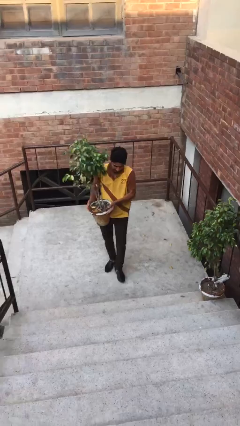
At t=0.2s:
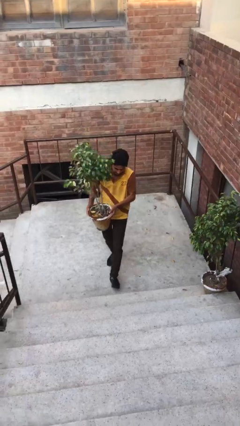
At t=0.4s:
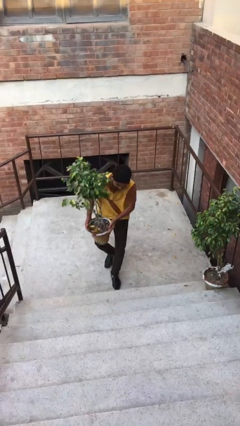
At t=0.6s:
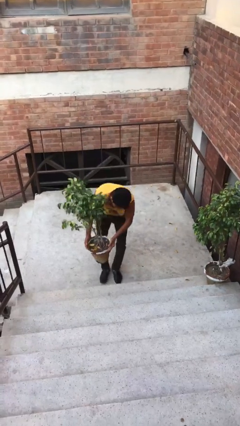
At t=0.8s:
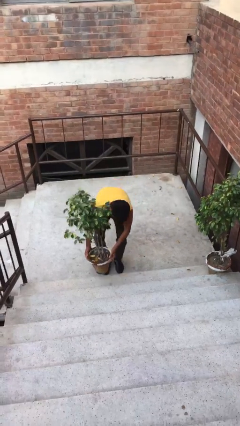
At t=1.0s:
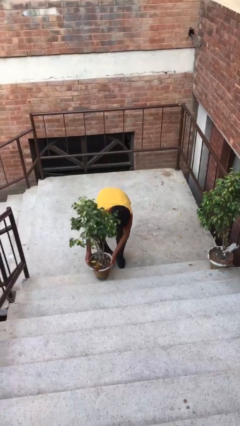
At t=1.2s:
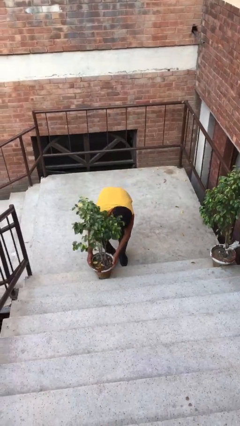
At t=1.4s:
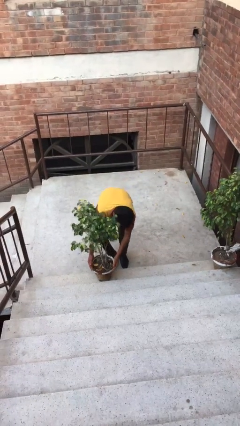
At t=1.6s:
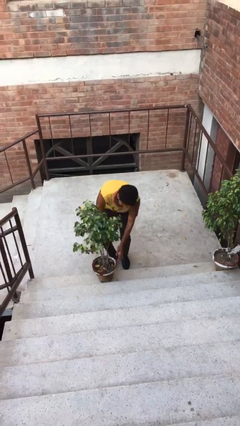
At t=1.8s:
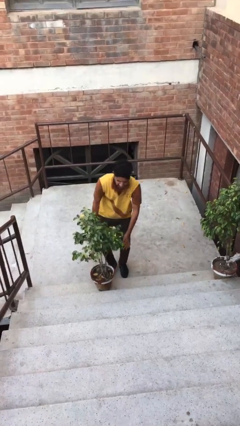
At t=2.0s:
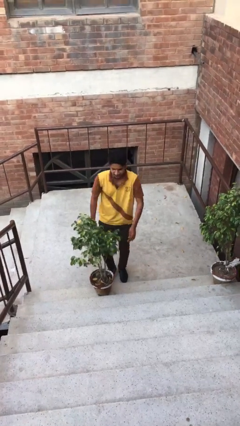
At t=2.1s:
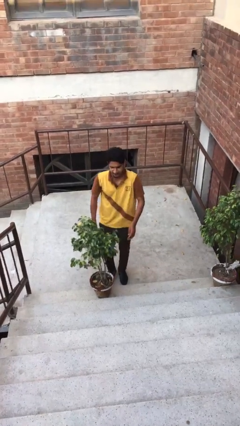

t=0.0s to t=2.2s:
person puts down object on floor

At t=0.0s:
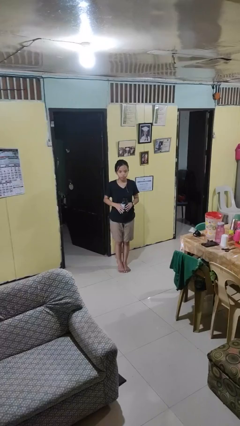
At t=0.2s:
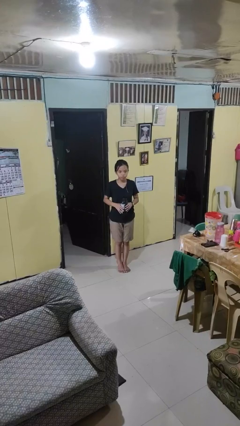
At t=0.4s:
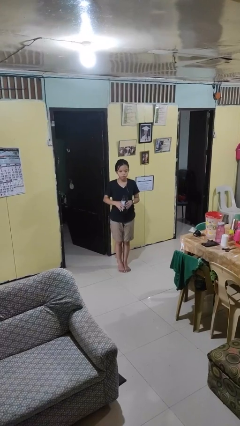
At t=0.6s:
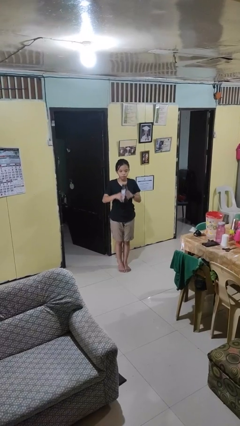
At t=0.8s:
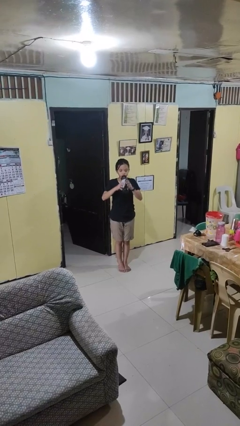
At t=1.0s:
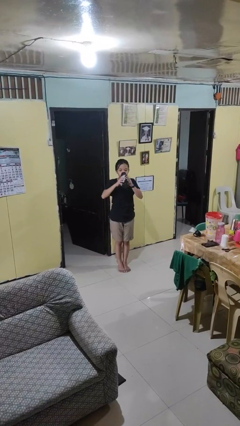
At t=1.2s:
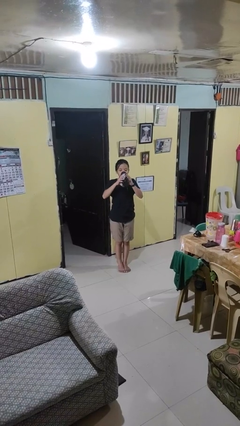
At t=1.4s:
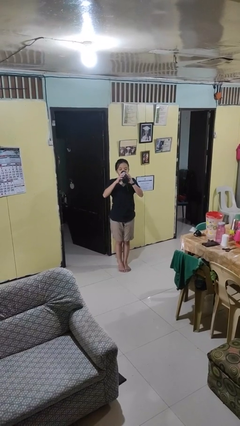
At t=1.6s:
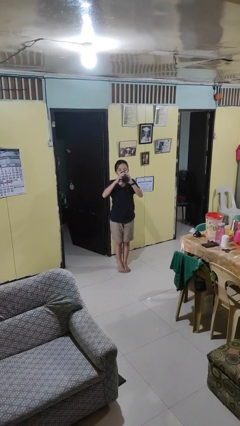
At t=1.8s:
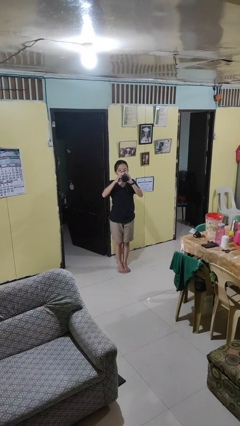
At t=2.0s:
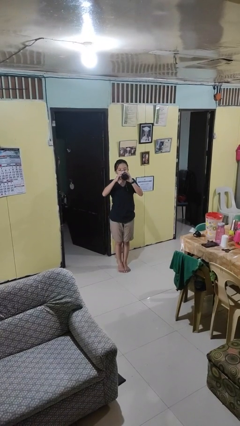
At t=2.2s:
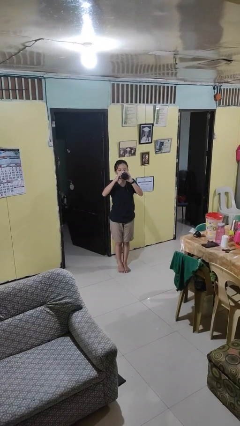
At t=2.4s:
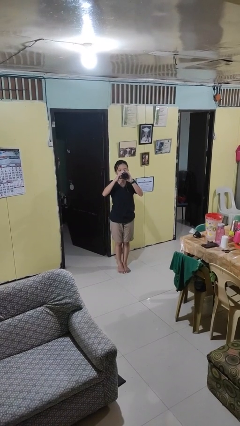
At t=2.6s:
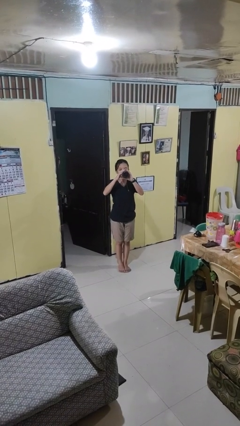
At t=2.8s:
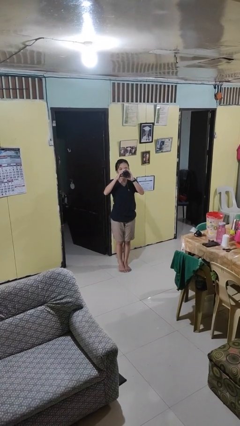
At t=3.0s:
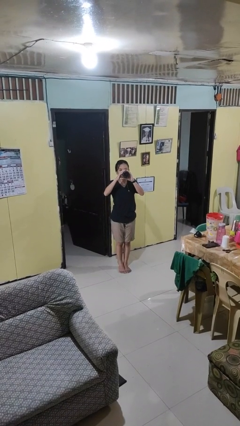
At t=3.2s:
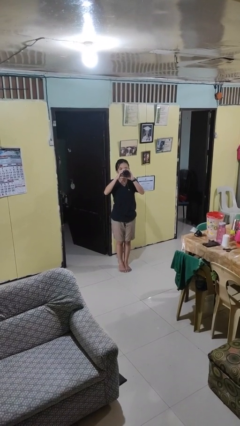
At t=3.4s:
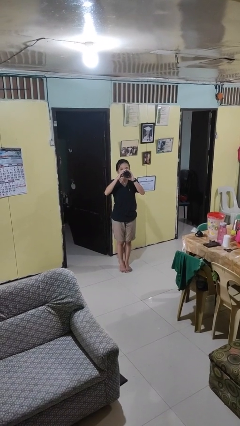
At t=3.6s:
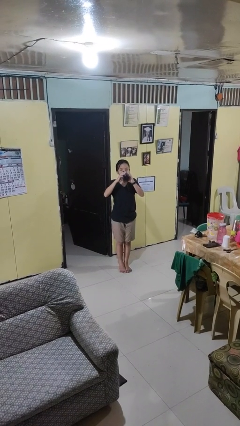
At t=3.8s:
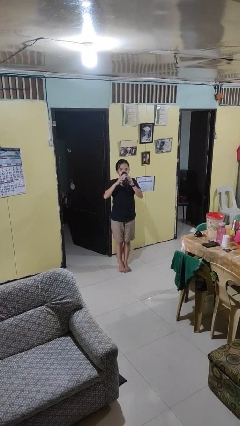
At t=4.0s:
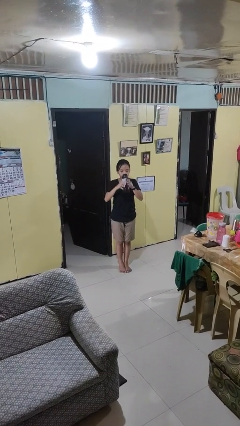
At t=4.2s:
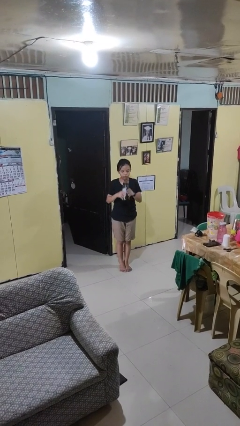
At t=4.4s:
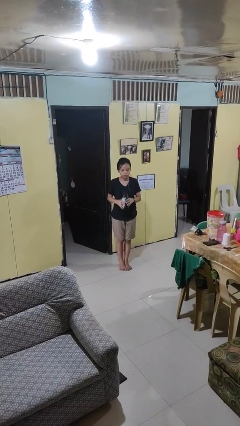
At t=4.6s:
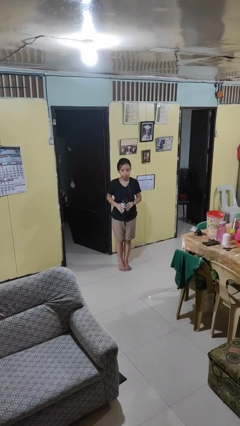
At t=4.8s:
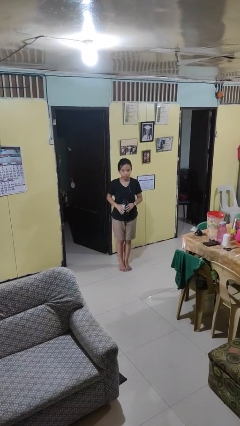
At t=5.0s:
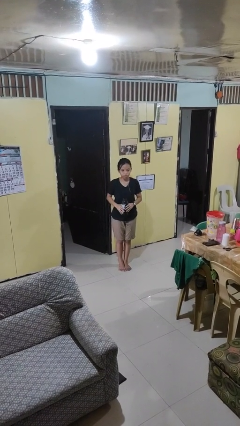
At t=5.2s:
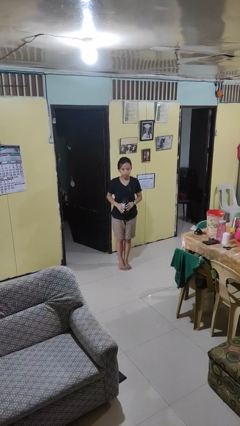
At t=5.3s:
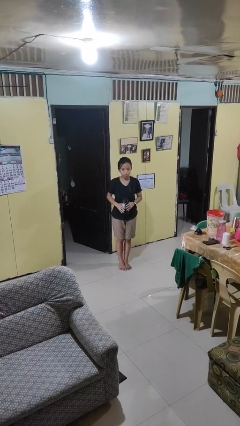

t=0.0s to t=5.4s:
person drinks from bottle

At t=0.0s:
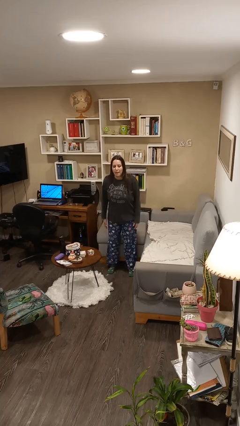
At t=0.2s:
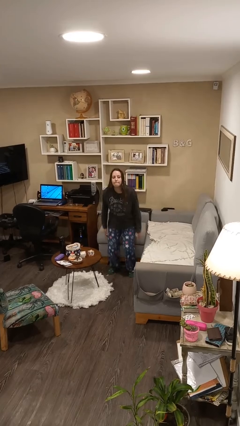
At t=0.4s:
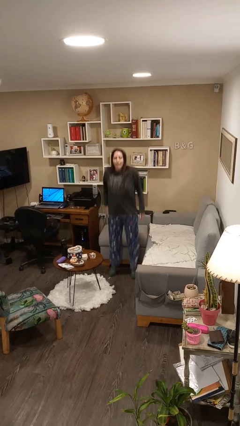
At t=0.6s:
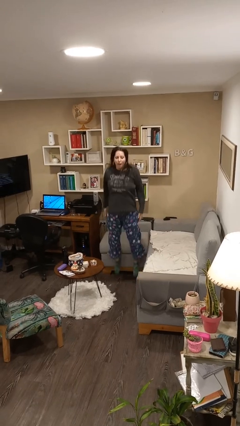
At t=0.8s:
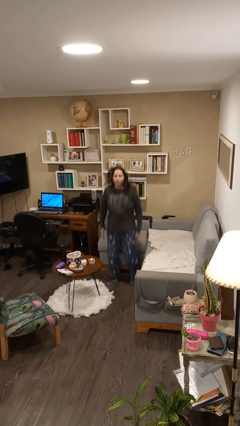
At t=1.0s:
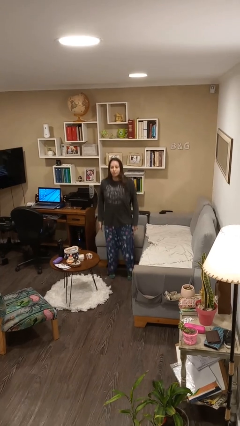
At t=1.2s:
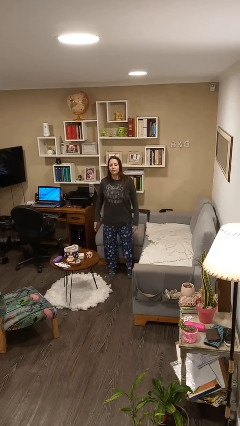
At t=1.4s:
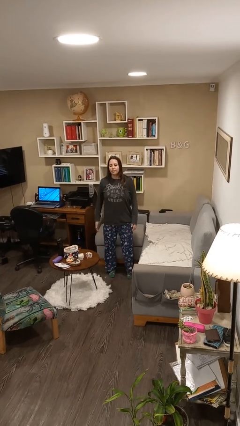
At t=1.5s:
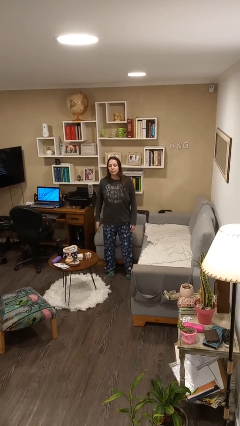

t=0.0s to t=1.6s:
person jumps

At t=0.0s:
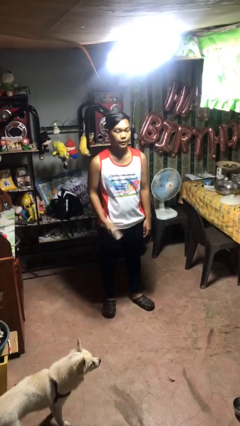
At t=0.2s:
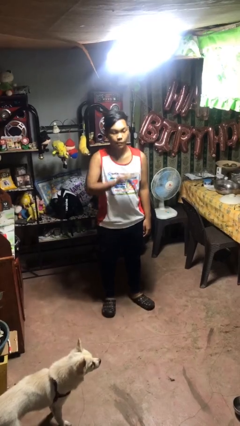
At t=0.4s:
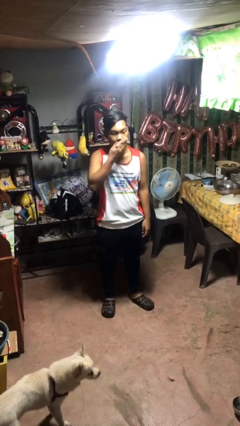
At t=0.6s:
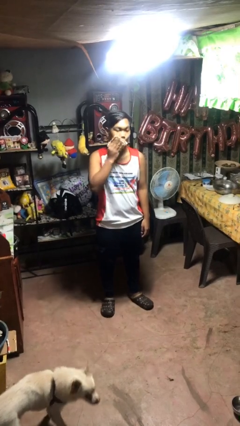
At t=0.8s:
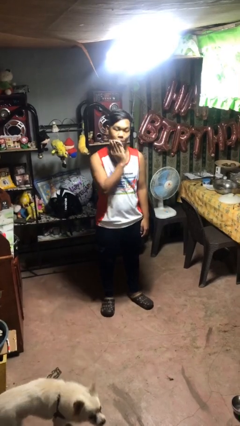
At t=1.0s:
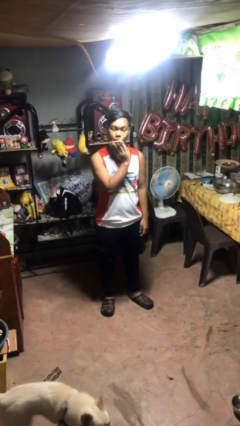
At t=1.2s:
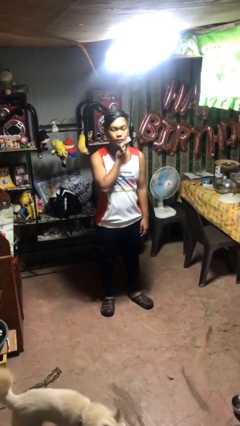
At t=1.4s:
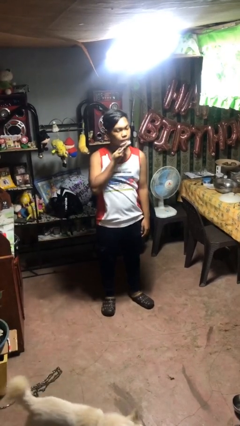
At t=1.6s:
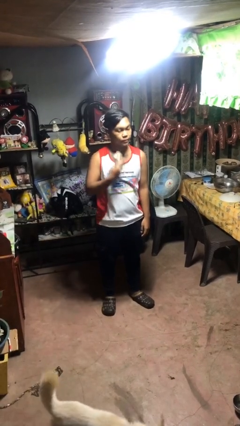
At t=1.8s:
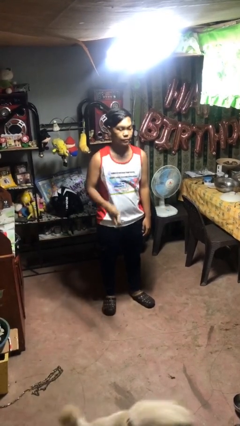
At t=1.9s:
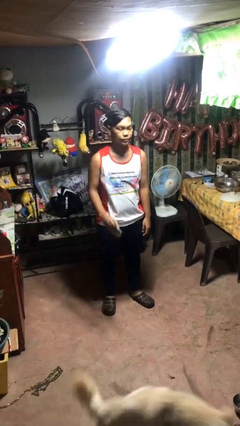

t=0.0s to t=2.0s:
person wipes mouth with napkin

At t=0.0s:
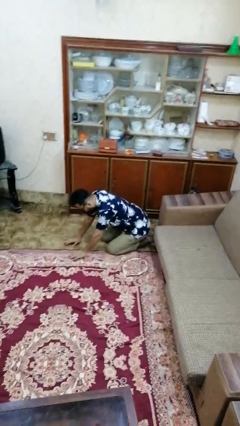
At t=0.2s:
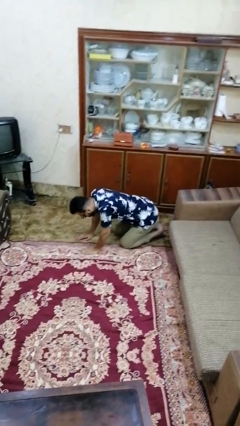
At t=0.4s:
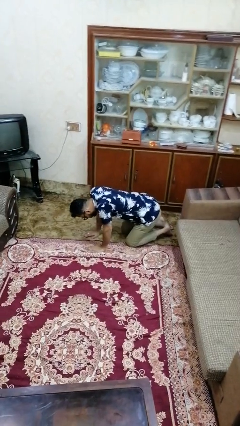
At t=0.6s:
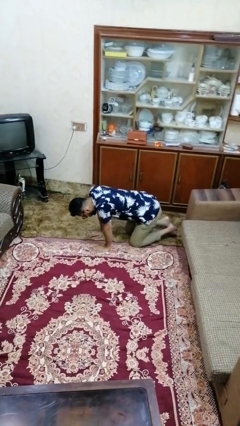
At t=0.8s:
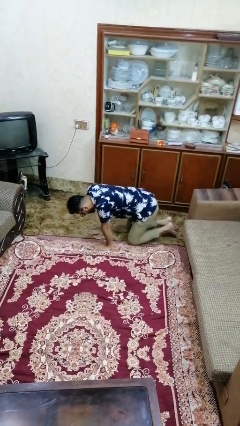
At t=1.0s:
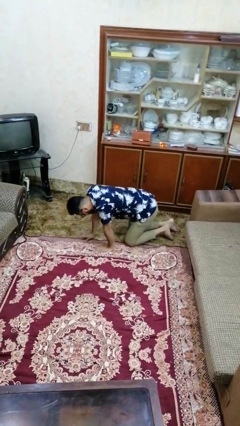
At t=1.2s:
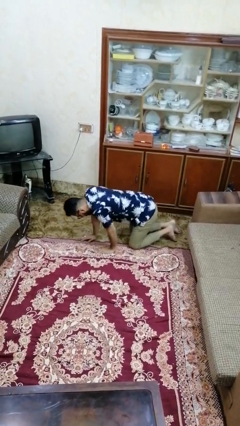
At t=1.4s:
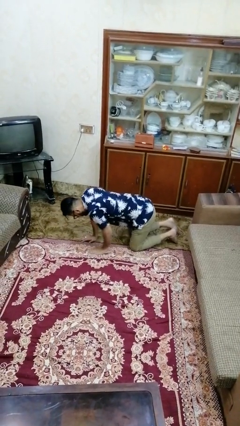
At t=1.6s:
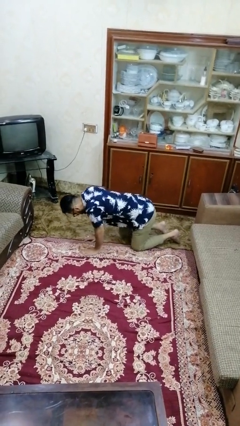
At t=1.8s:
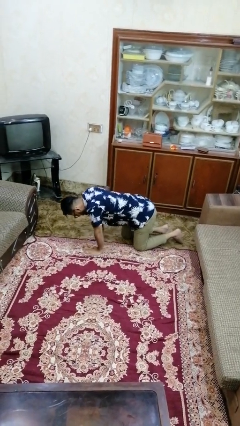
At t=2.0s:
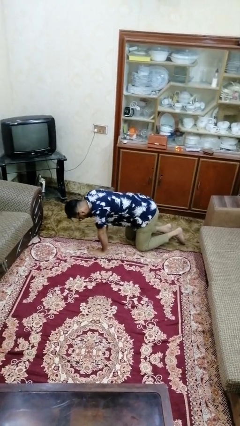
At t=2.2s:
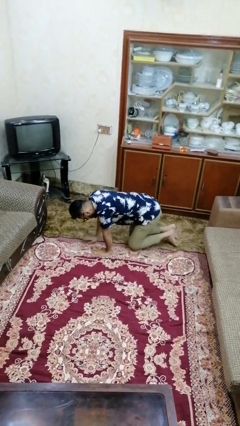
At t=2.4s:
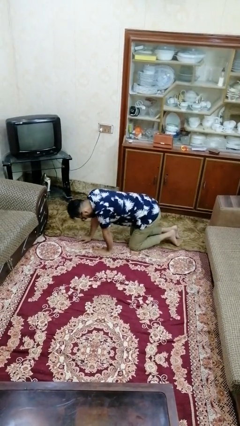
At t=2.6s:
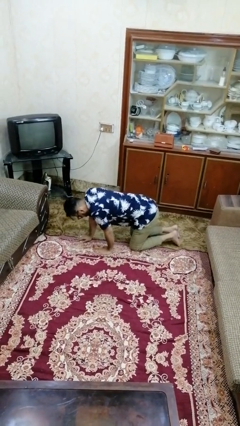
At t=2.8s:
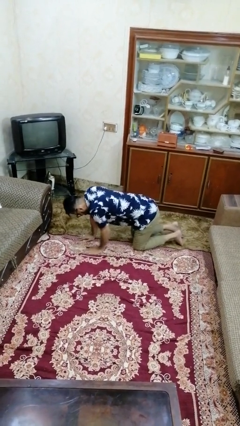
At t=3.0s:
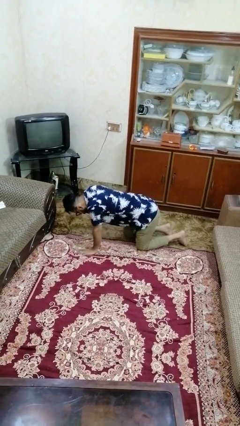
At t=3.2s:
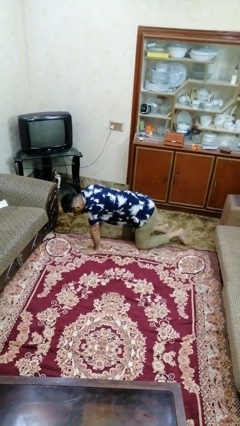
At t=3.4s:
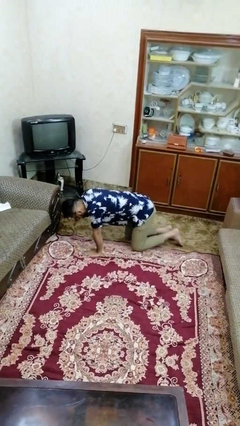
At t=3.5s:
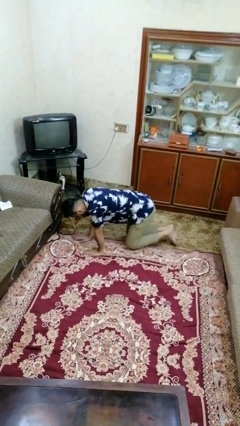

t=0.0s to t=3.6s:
person crawls

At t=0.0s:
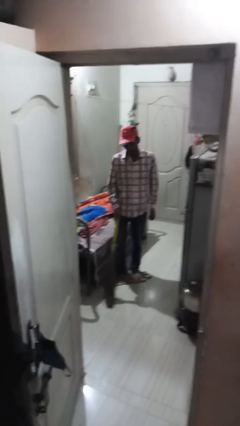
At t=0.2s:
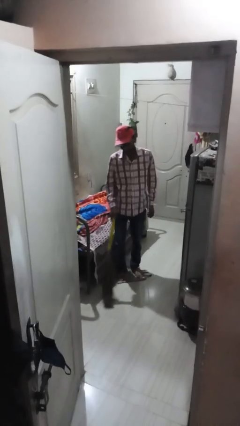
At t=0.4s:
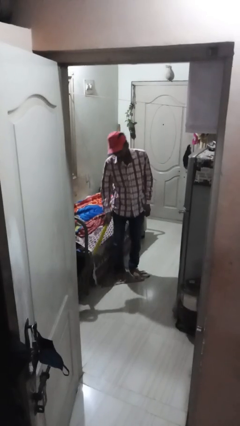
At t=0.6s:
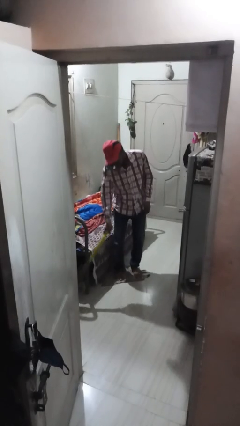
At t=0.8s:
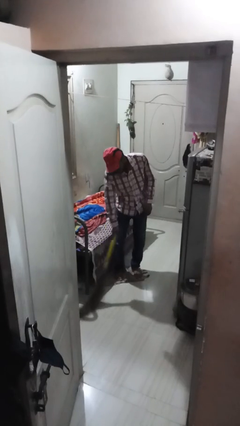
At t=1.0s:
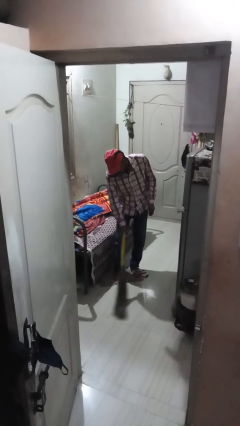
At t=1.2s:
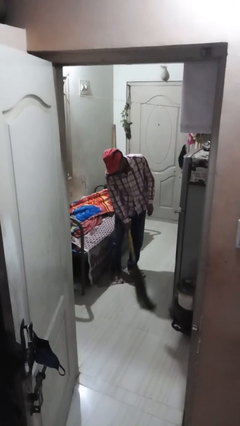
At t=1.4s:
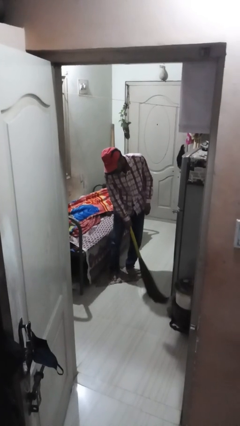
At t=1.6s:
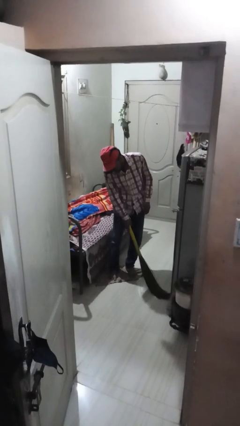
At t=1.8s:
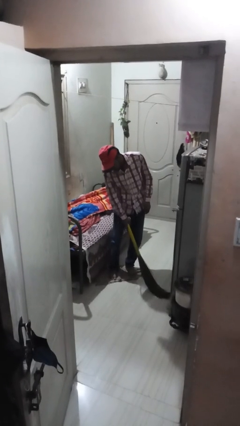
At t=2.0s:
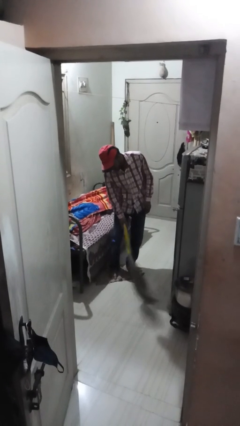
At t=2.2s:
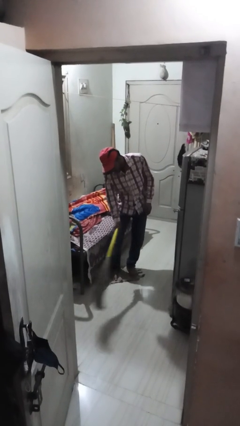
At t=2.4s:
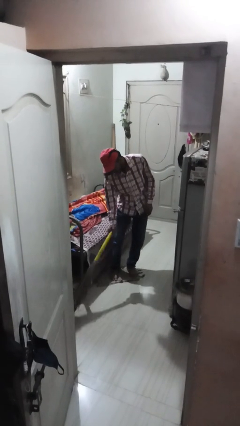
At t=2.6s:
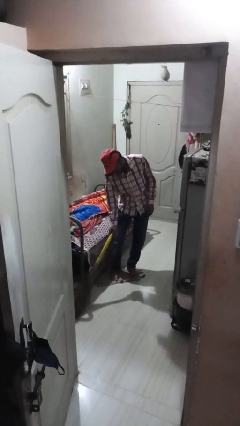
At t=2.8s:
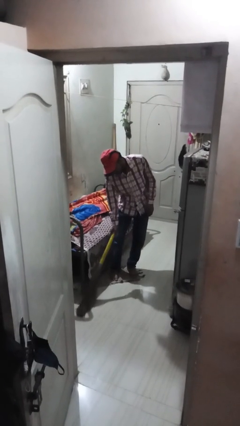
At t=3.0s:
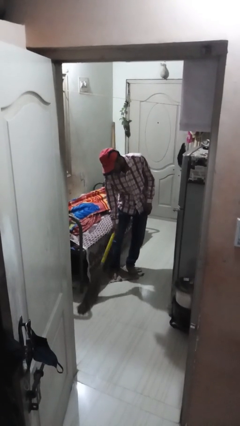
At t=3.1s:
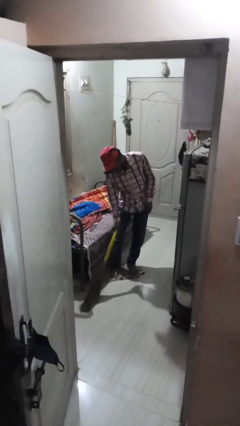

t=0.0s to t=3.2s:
person sweeps floor
